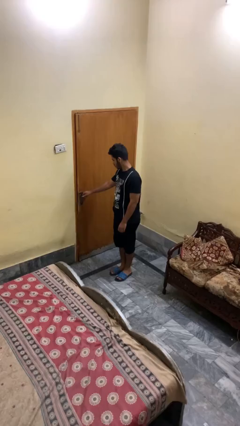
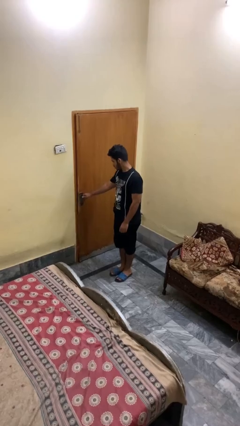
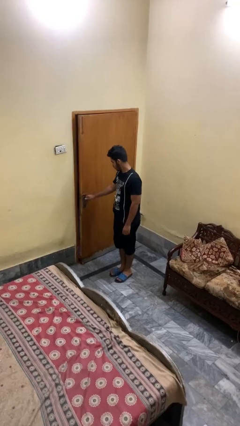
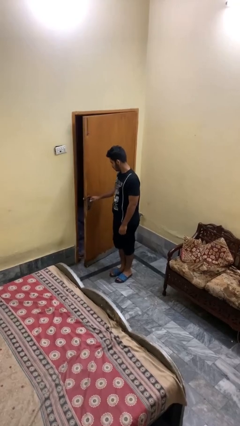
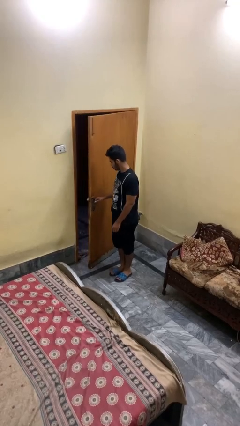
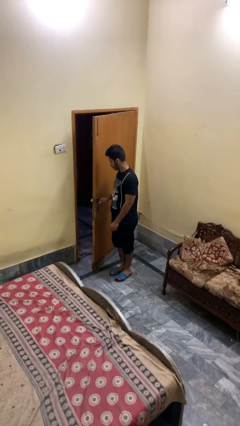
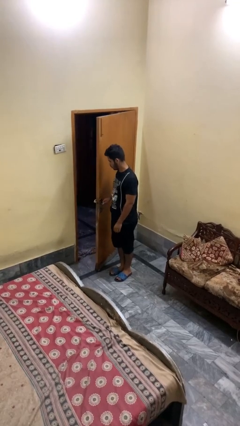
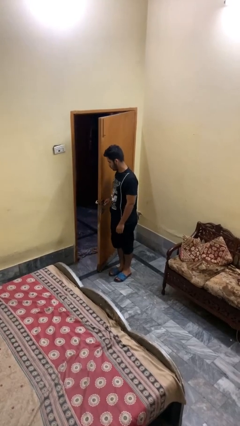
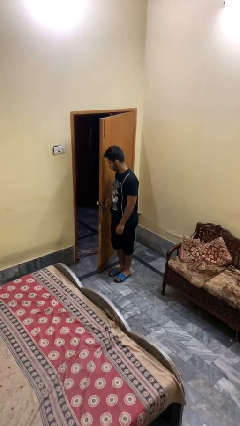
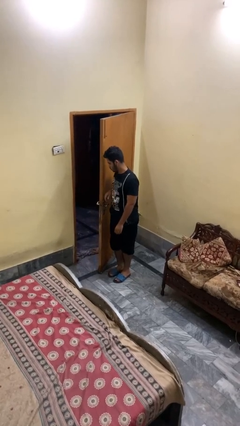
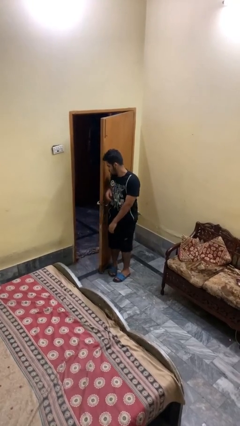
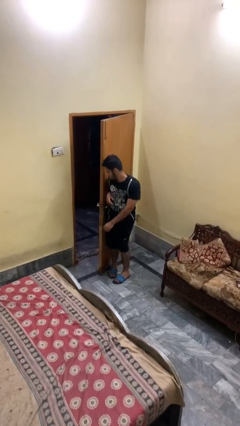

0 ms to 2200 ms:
person opens facility door

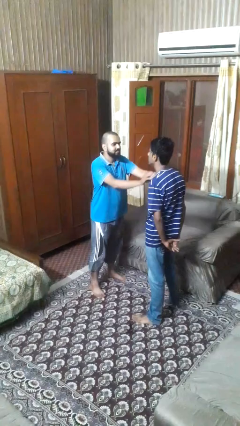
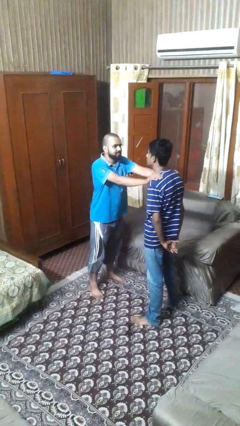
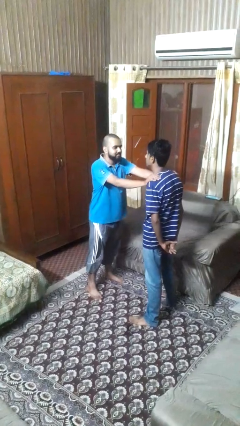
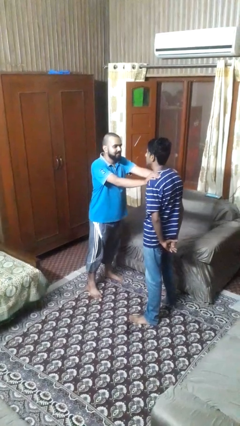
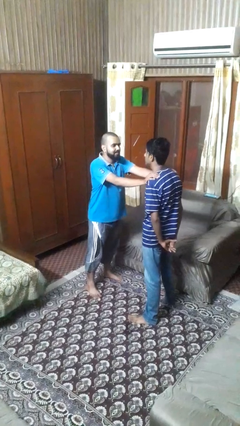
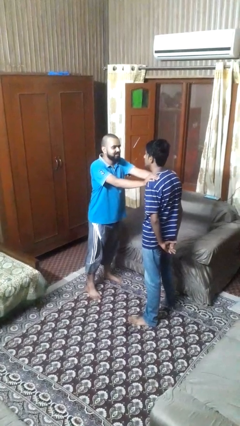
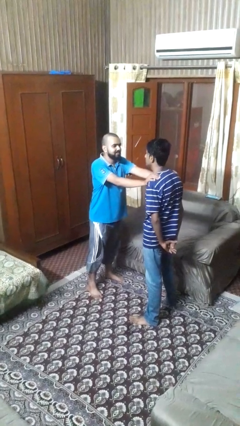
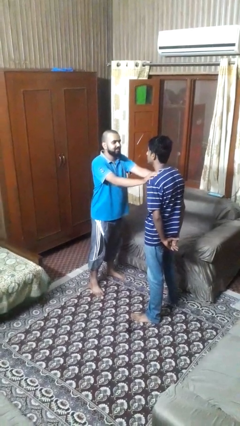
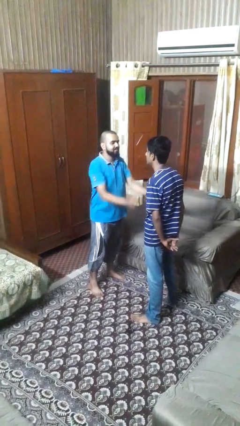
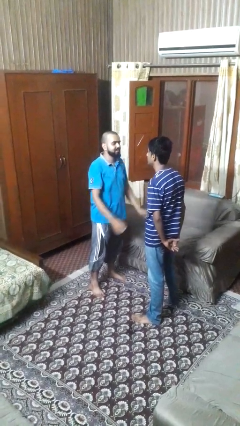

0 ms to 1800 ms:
person pounds shoulders of person

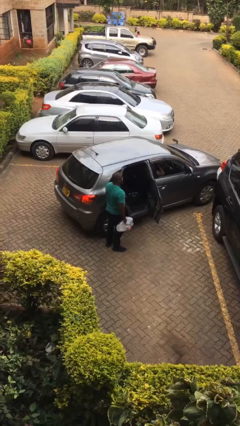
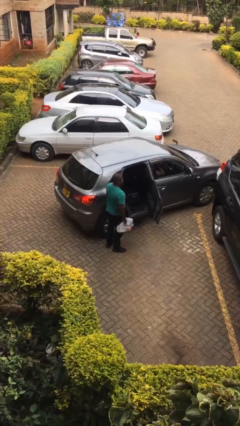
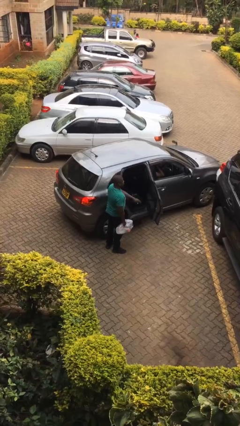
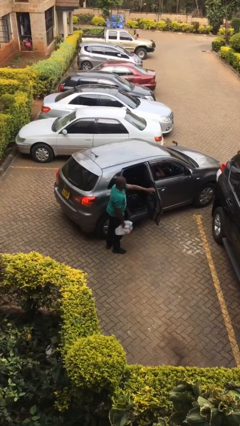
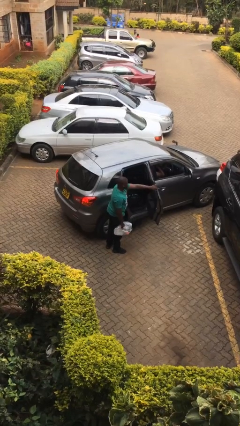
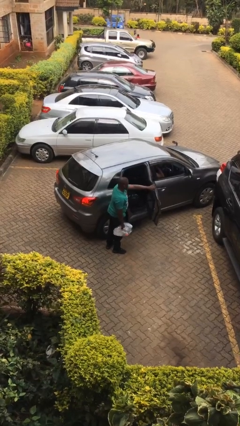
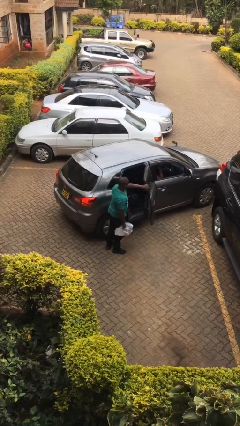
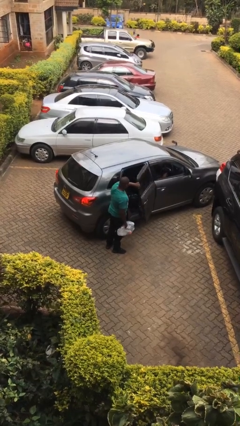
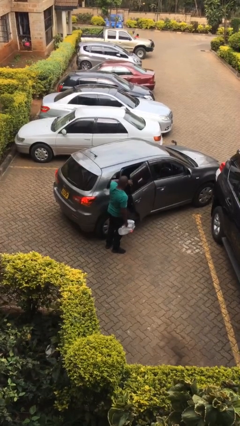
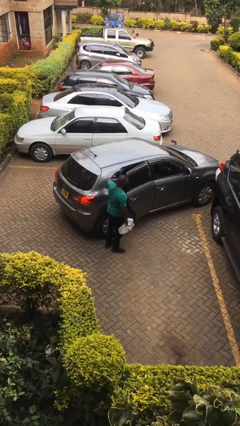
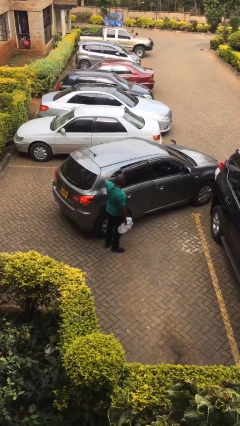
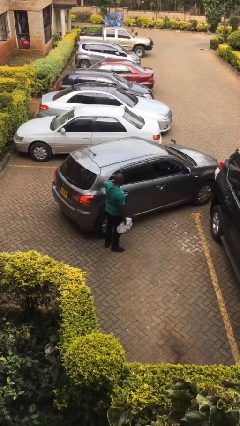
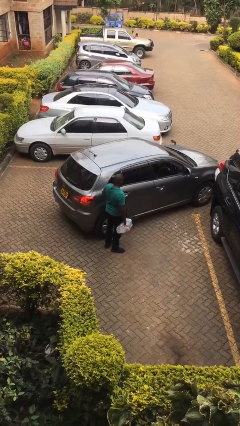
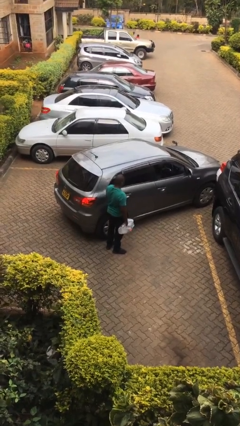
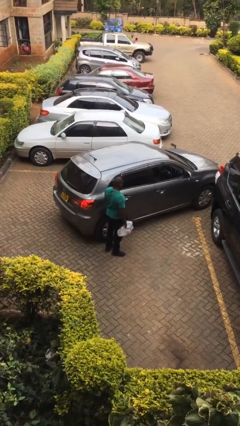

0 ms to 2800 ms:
person closes car door

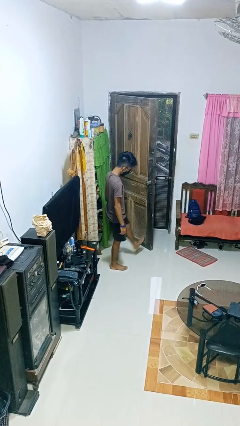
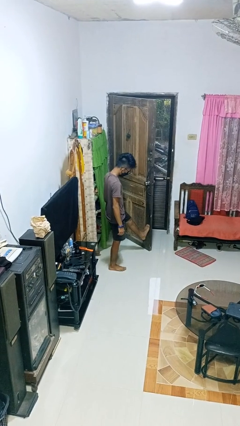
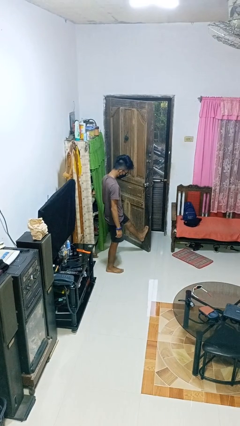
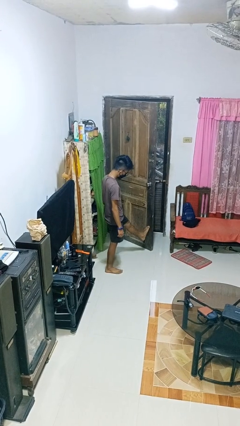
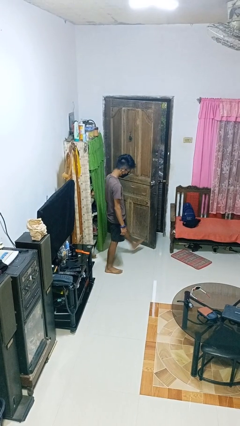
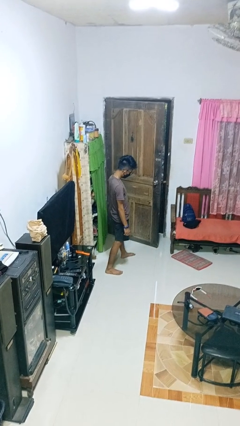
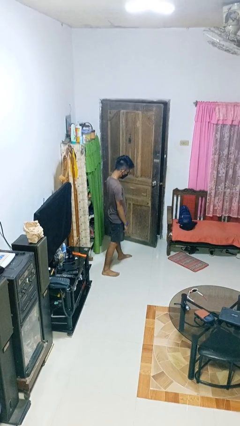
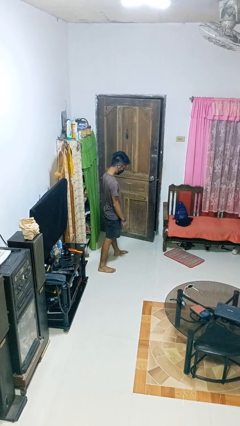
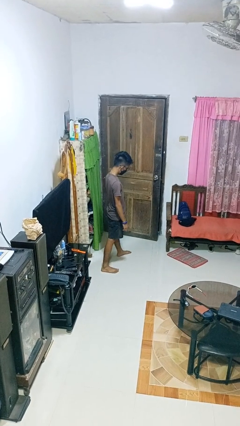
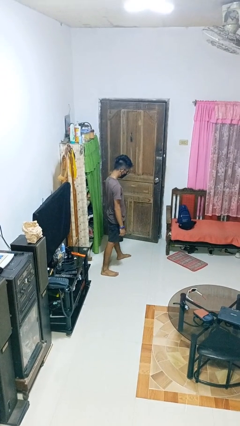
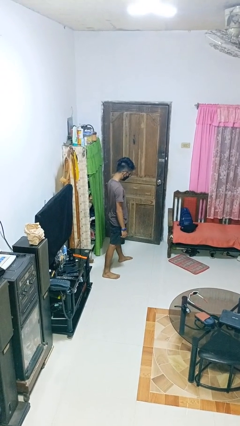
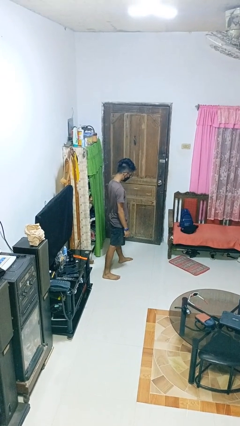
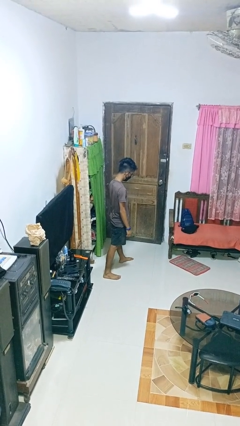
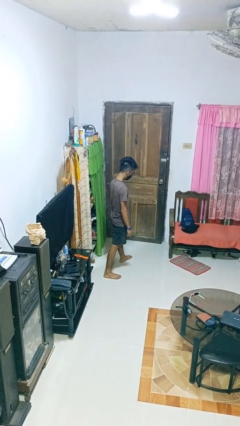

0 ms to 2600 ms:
person closes door with foot

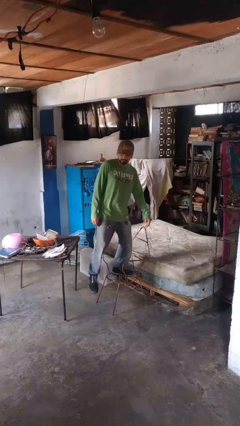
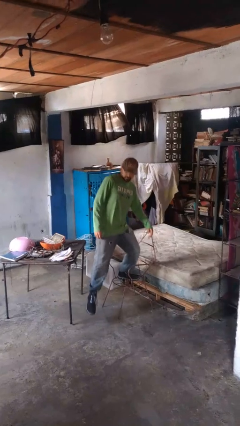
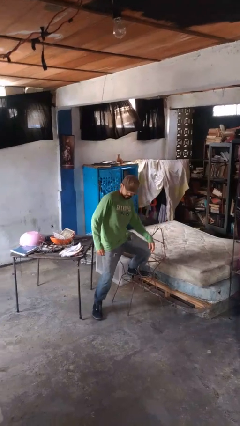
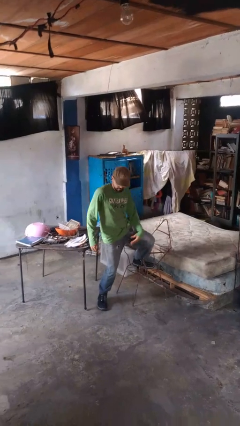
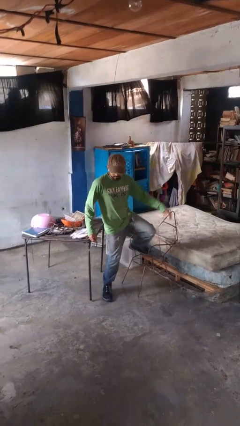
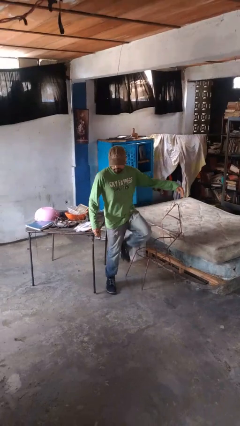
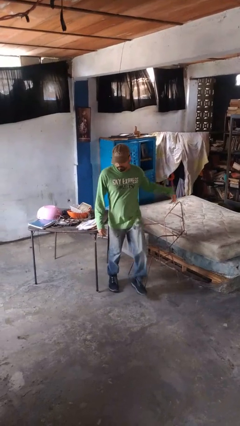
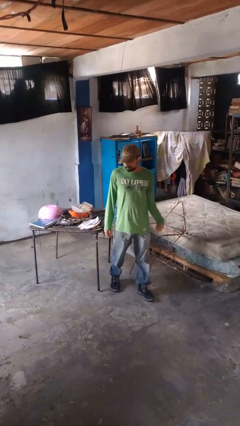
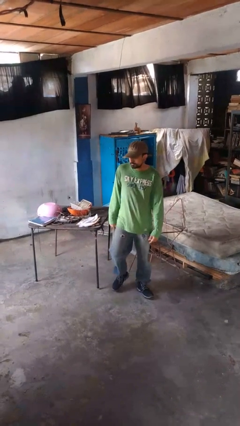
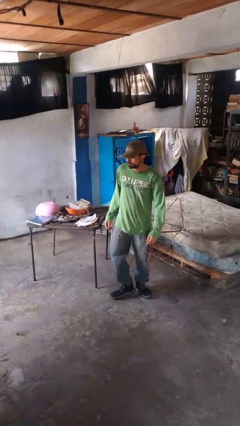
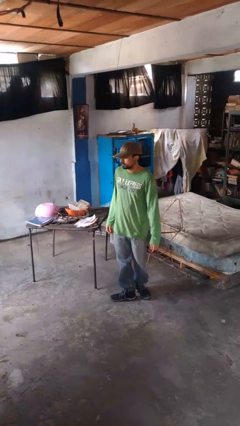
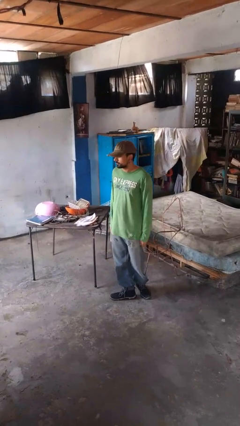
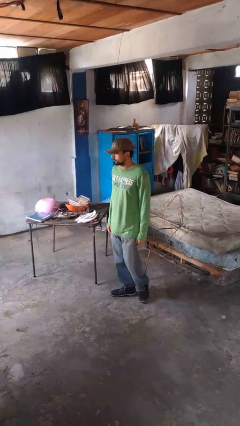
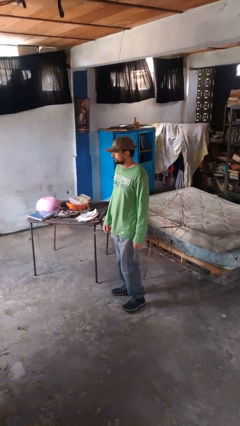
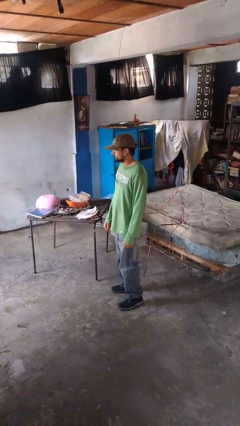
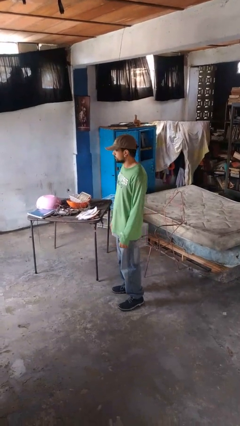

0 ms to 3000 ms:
person climbs off chair

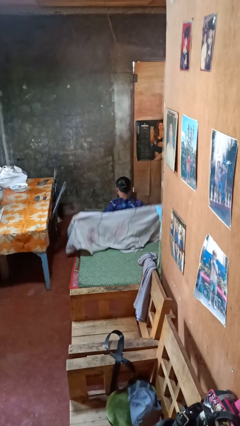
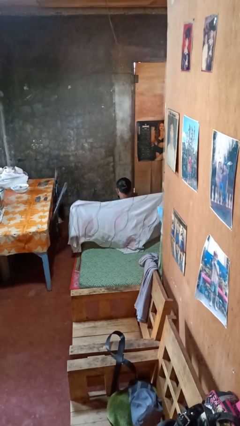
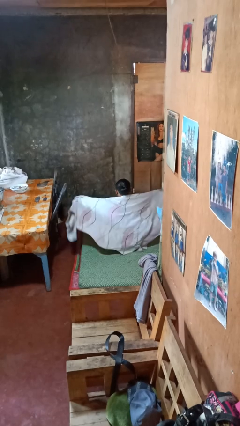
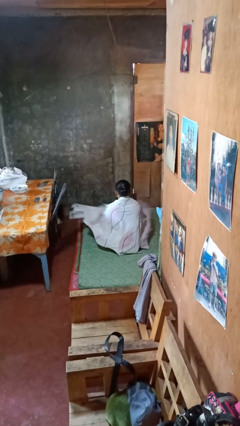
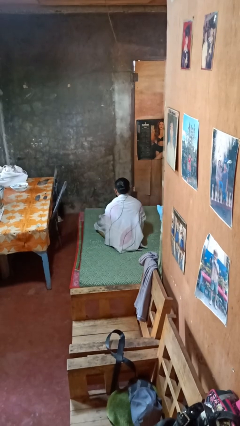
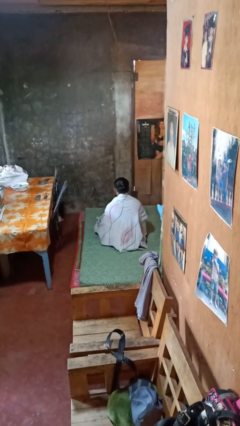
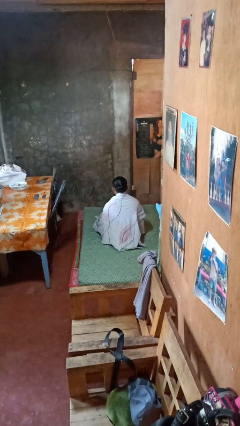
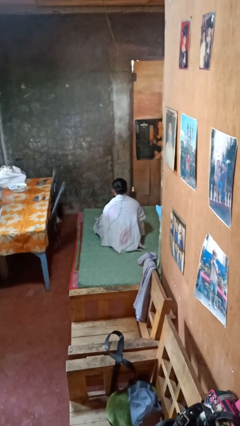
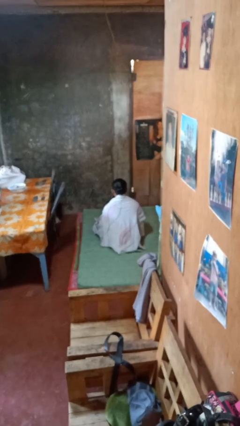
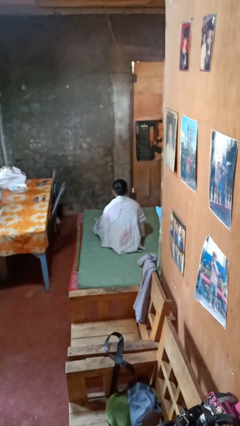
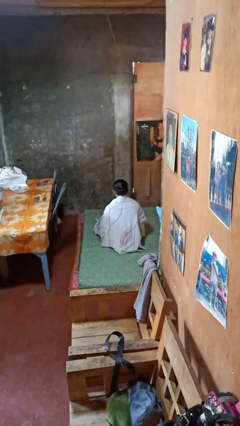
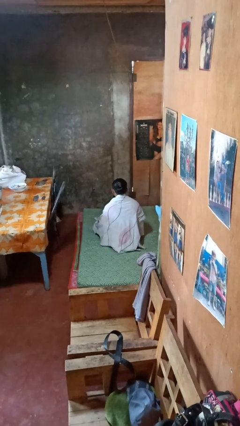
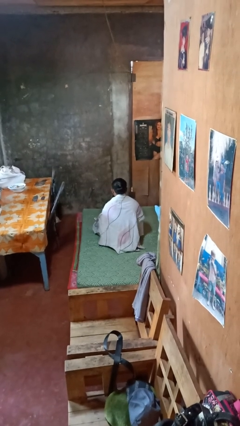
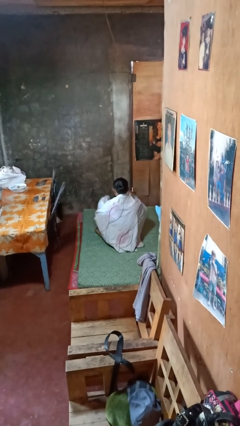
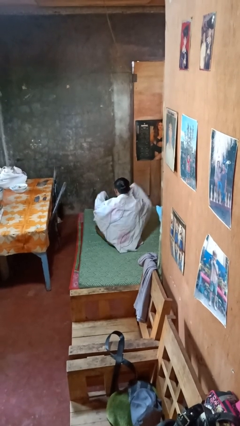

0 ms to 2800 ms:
person covers with blanket

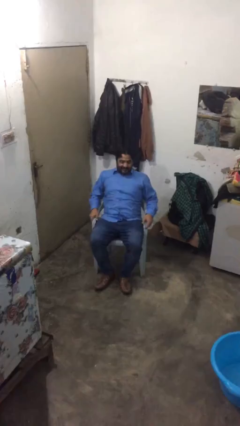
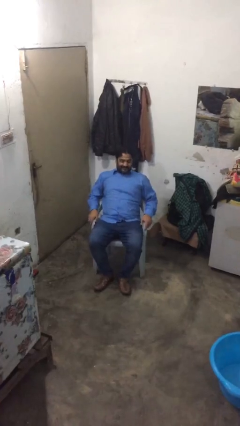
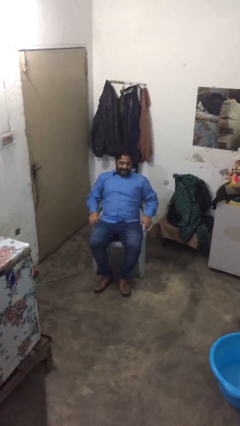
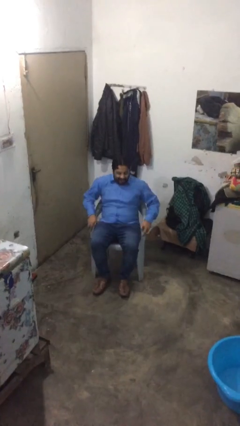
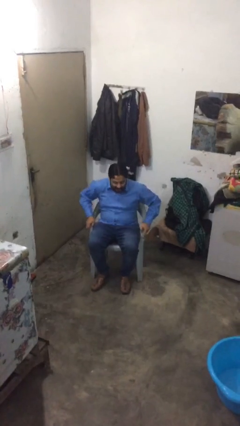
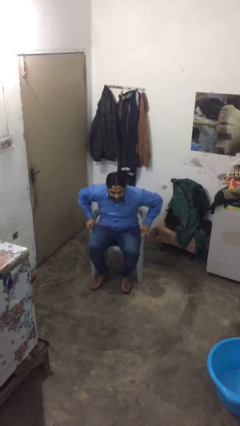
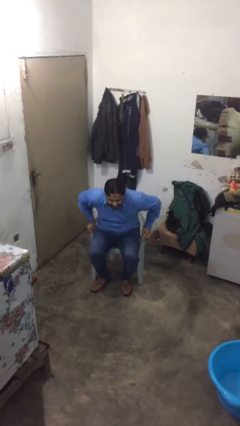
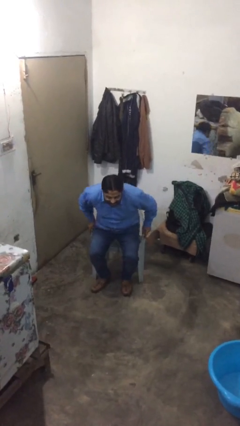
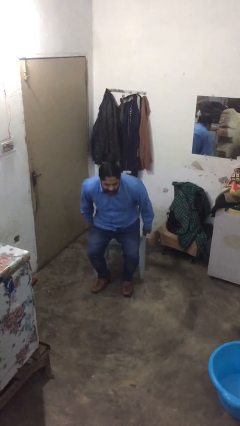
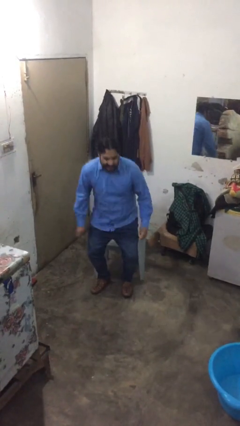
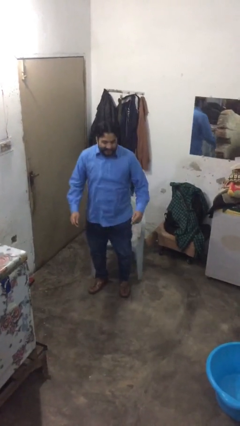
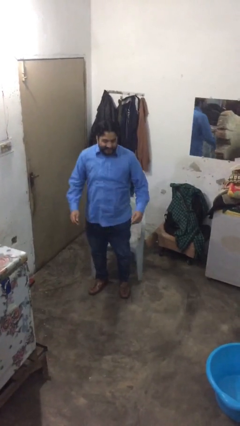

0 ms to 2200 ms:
person stands up
